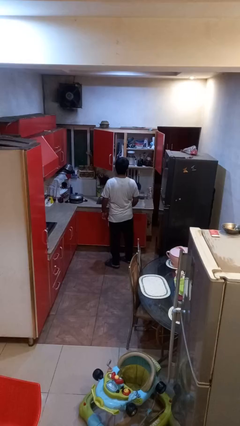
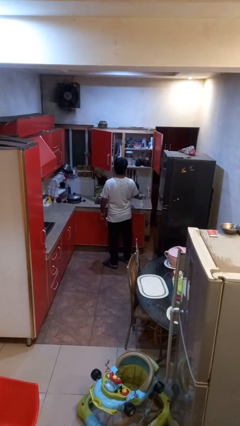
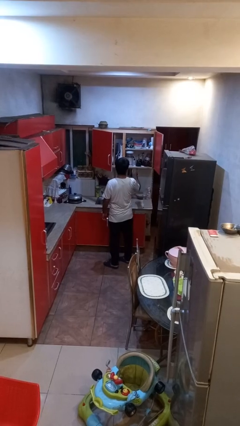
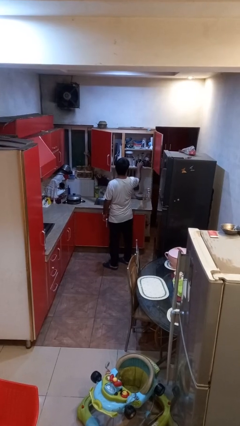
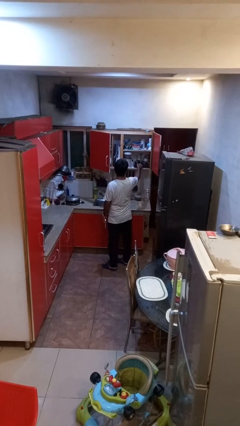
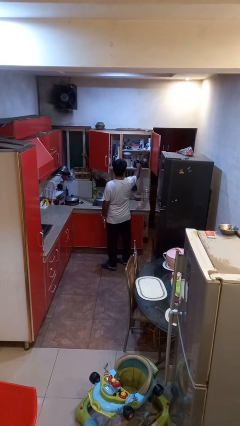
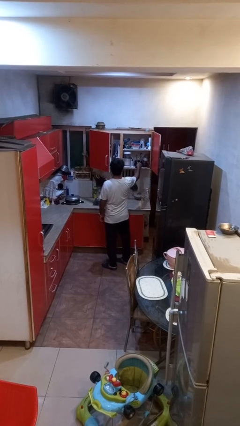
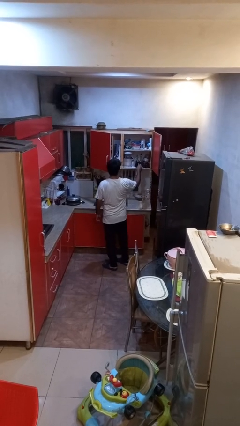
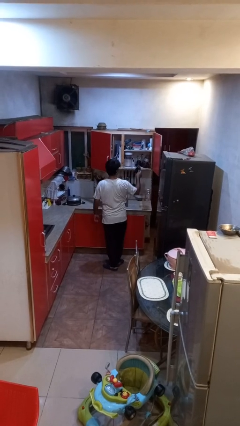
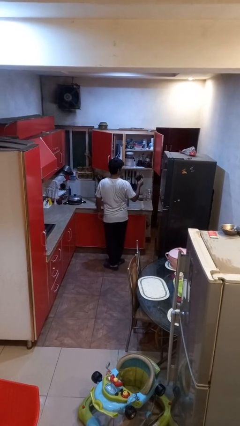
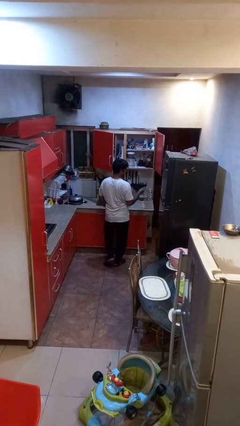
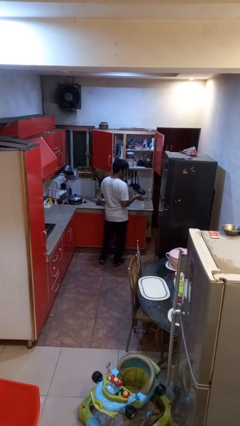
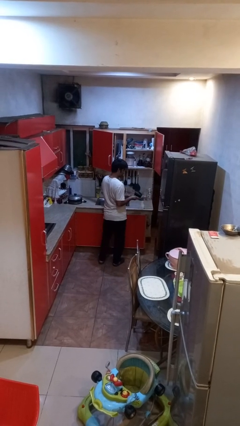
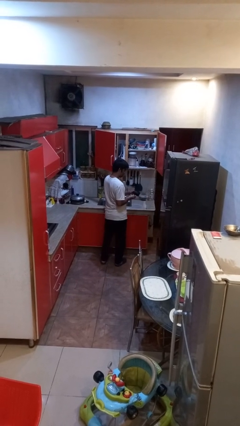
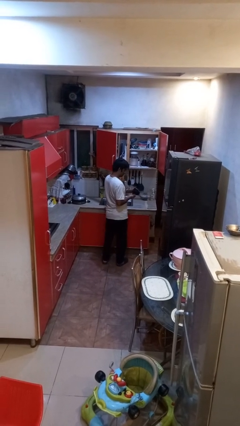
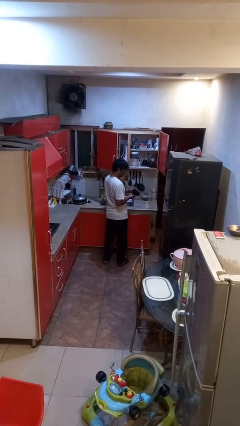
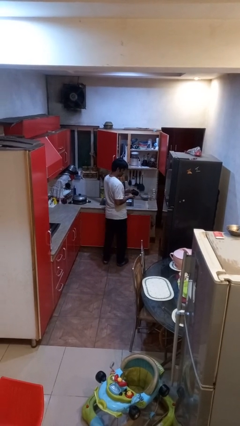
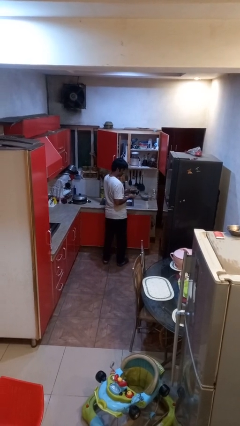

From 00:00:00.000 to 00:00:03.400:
person picks up object from cabinet

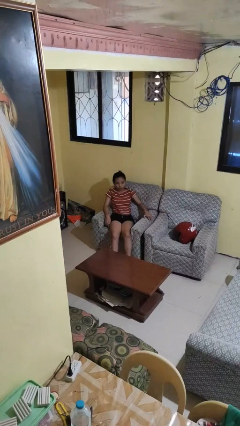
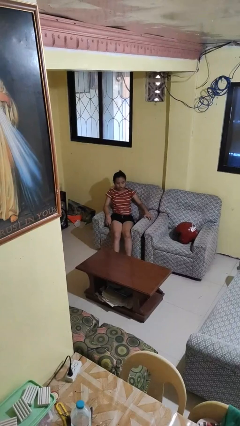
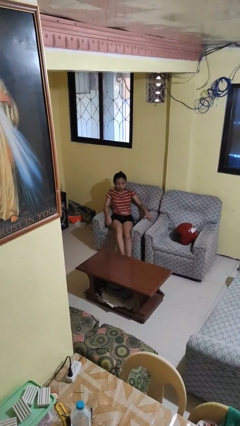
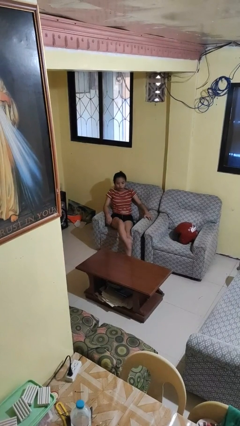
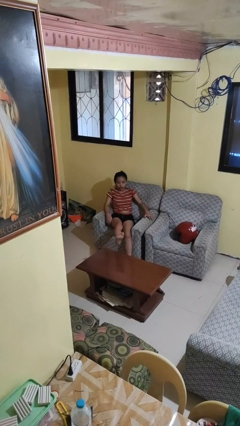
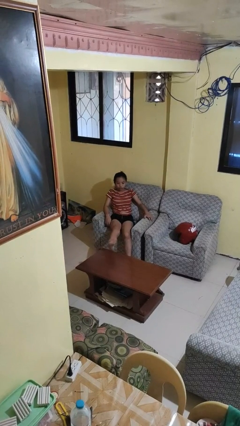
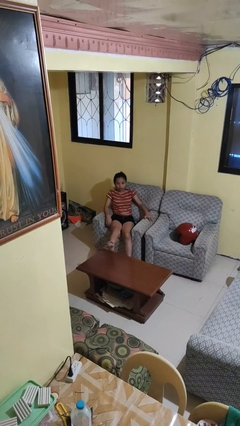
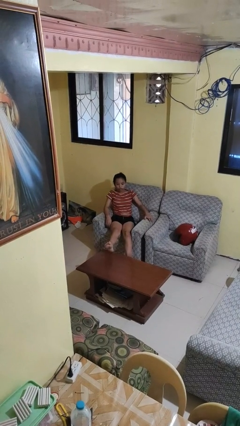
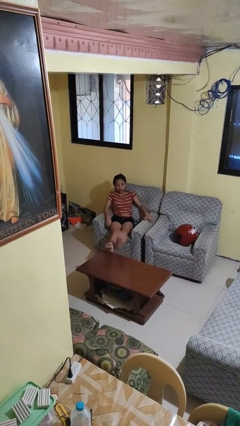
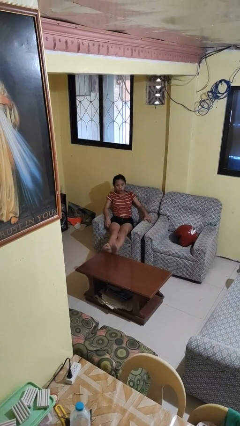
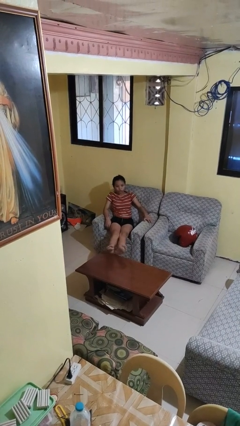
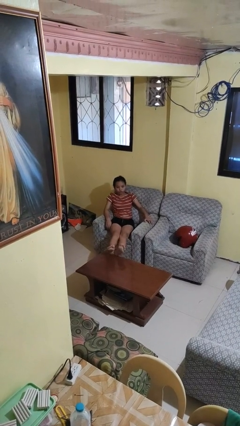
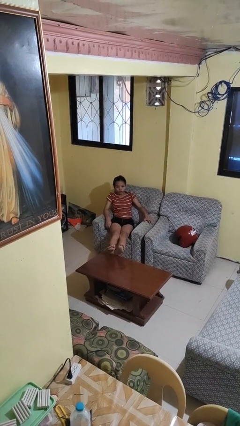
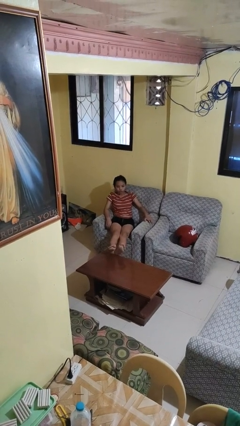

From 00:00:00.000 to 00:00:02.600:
person puts feet up

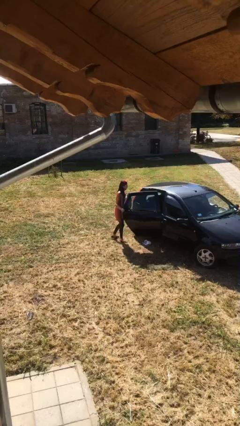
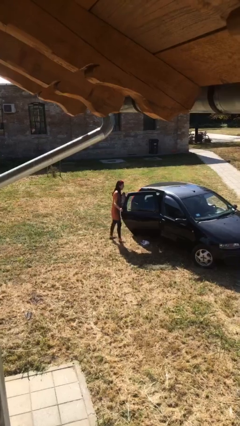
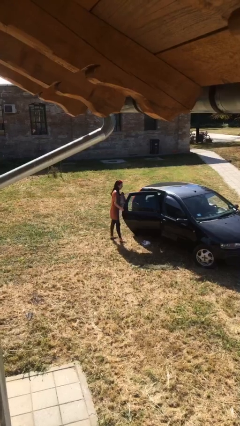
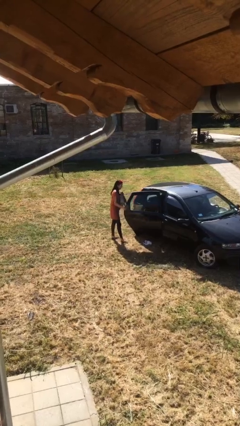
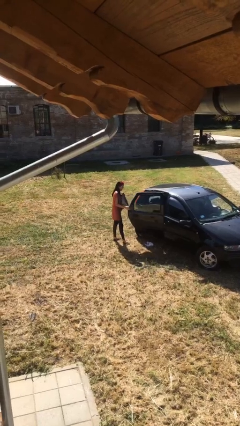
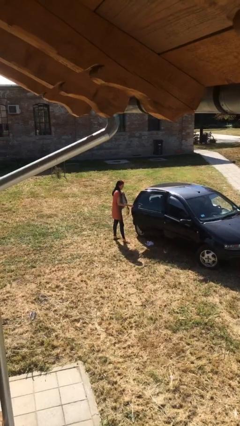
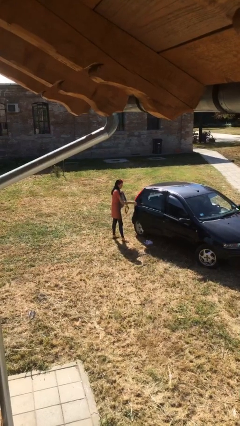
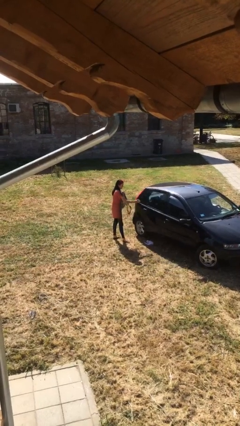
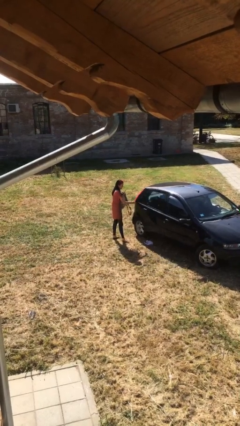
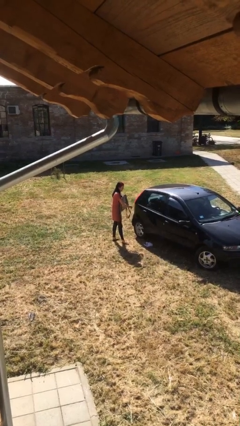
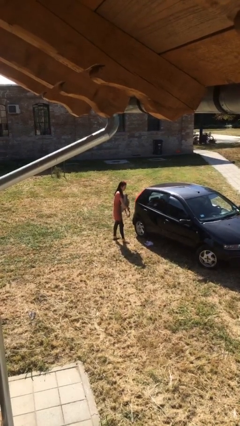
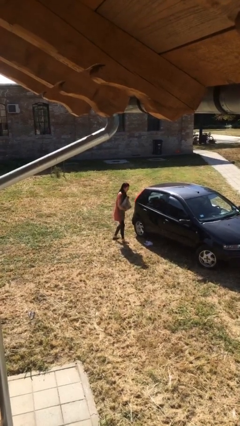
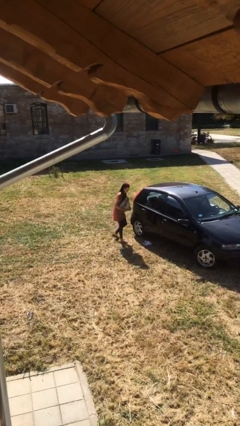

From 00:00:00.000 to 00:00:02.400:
person closes car door

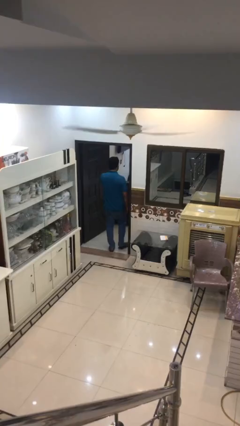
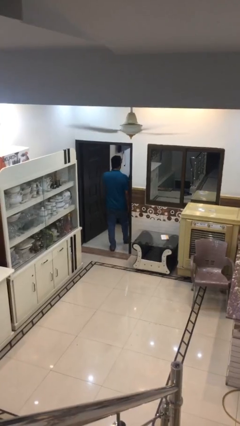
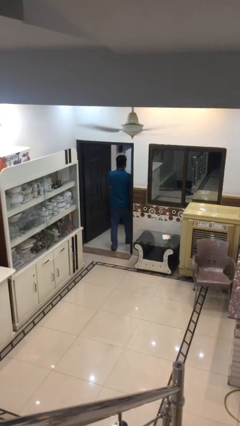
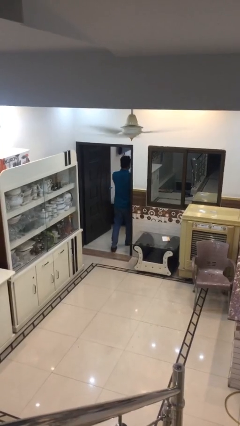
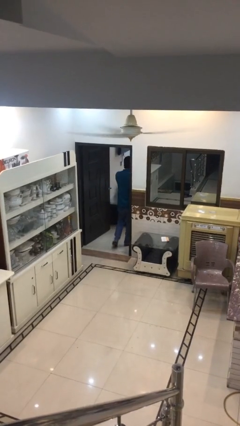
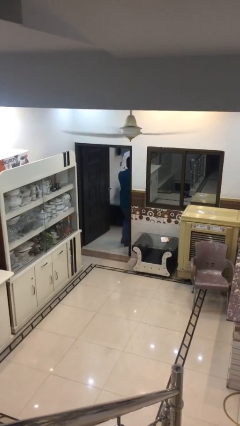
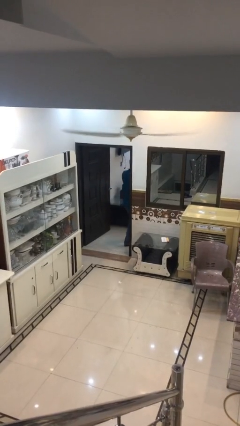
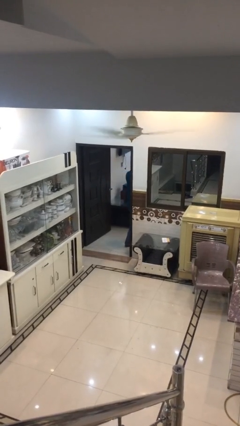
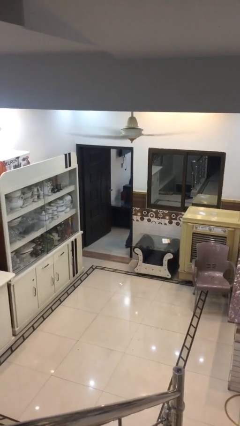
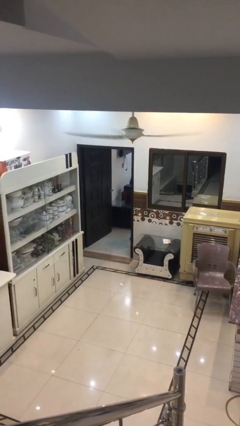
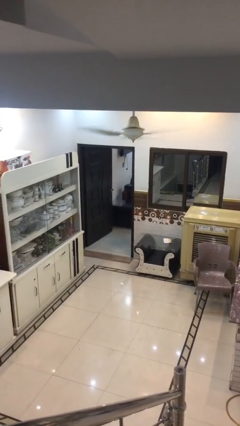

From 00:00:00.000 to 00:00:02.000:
person exits scene through structure

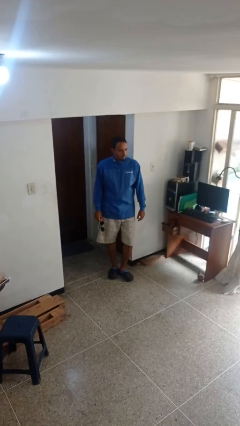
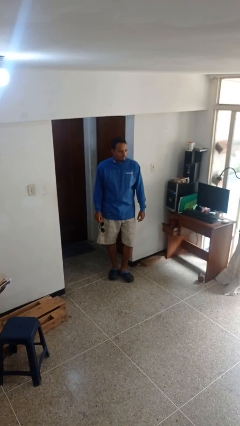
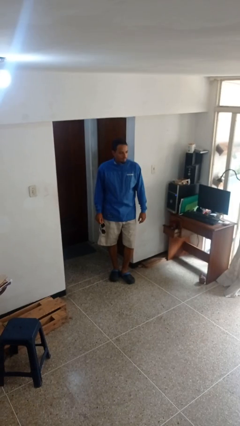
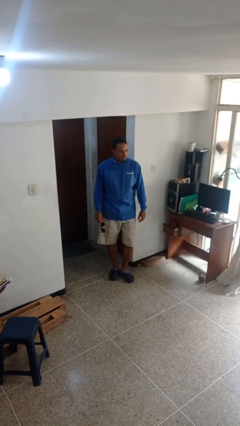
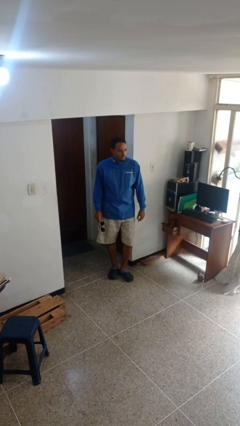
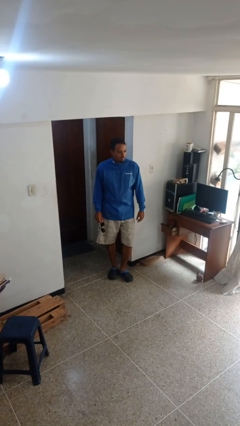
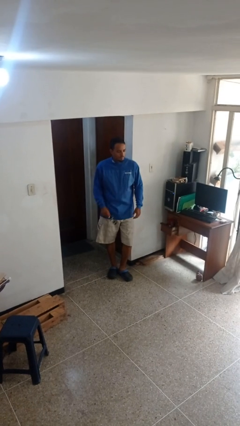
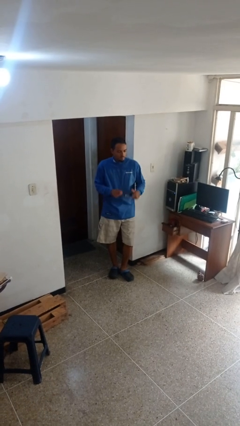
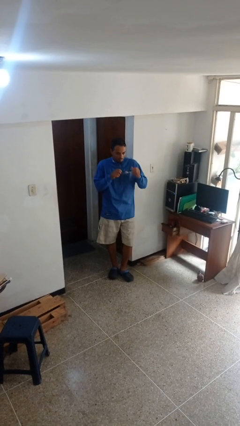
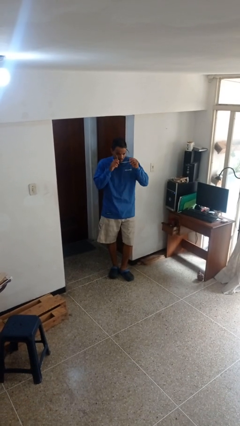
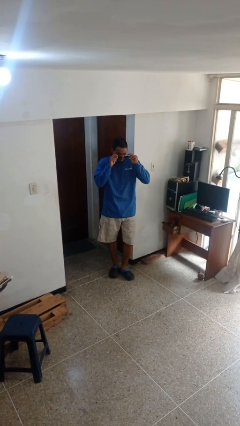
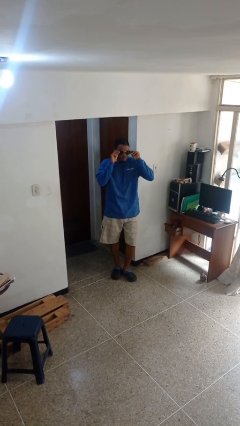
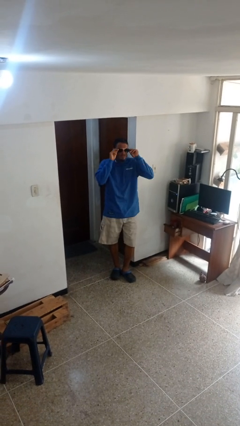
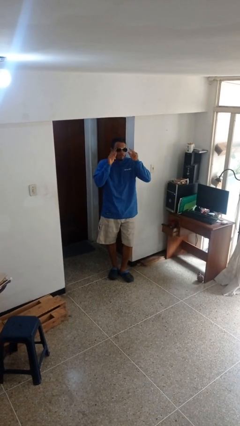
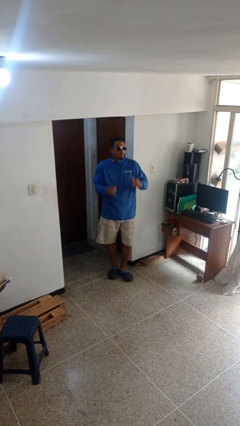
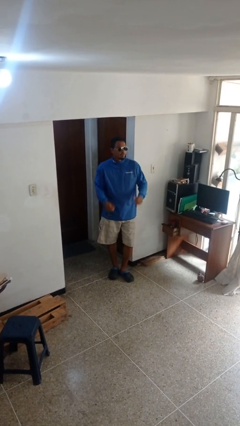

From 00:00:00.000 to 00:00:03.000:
person puts on sunglasses

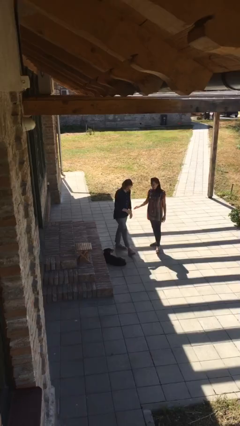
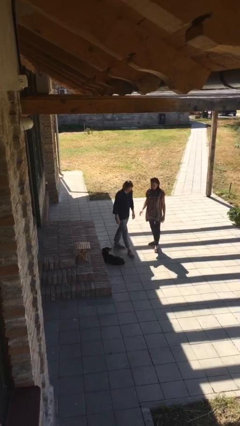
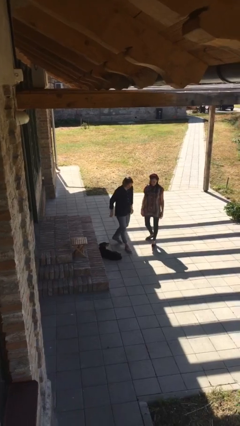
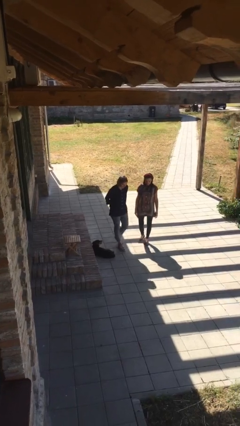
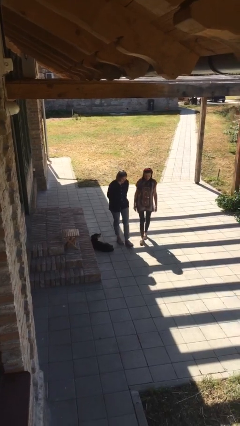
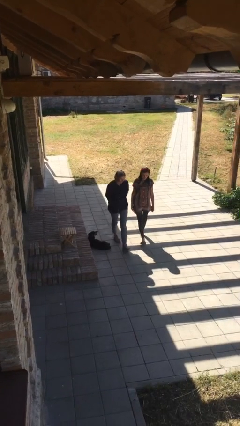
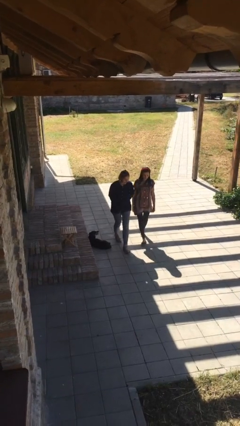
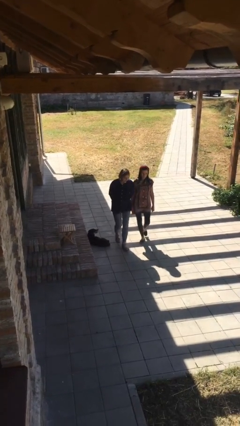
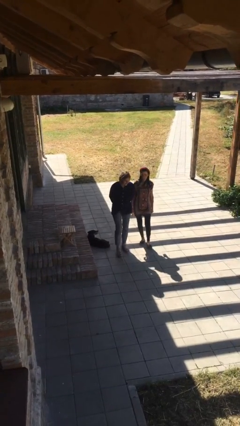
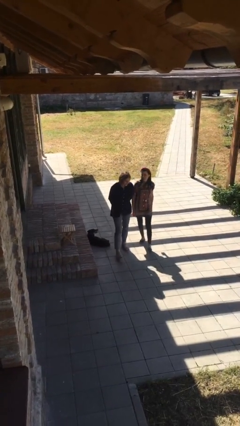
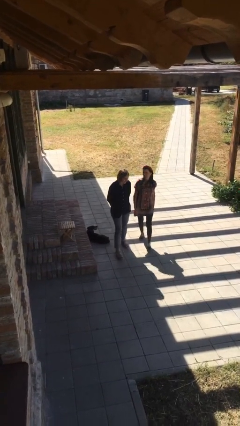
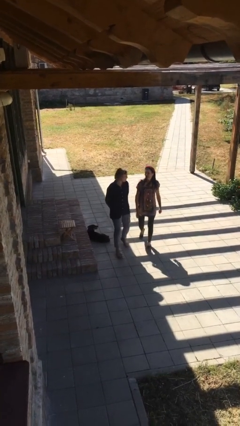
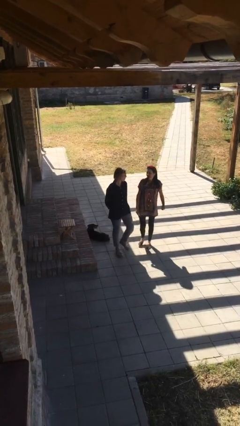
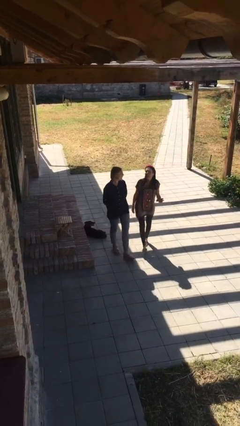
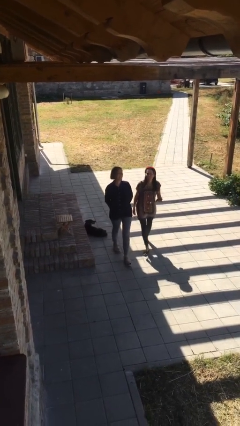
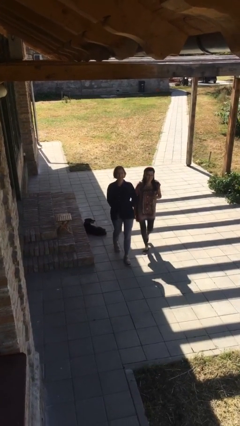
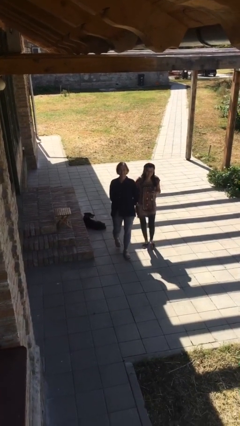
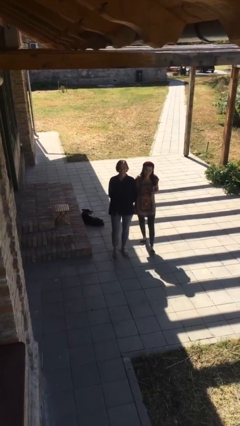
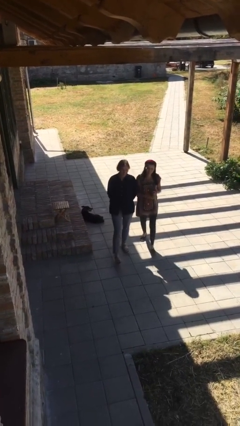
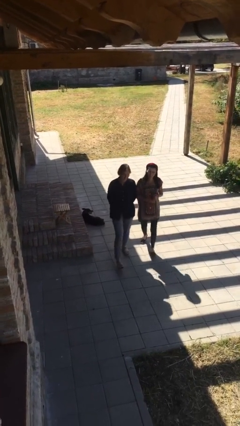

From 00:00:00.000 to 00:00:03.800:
person talks to person
